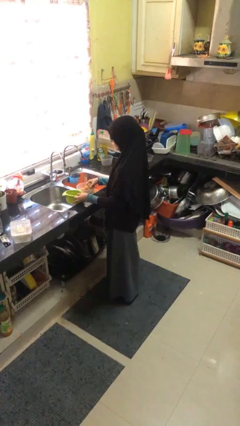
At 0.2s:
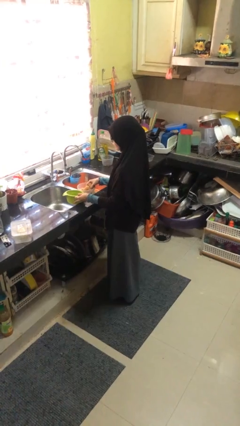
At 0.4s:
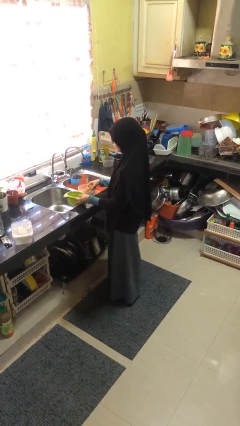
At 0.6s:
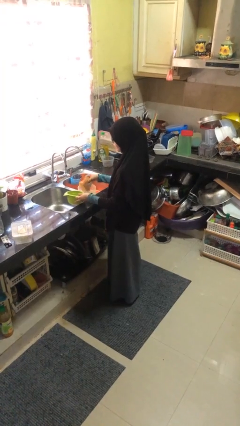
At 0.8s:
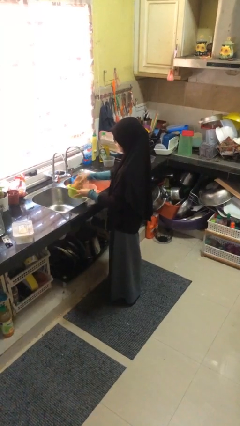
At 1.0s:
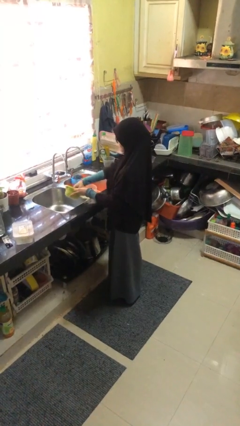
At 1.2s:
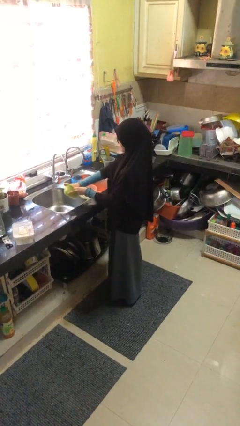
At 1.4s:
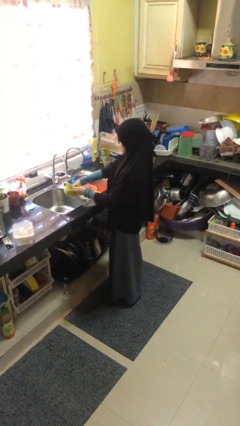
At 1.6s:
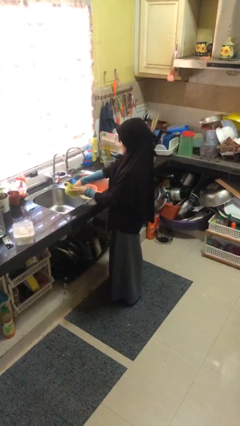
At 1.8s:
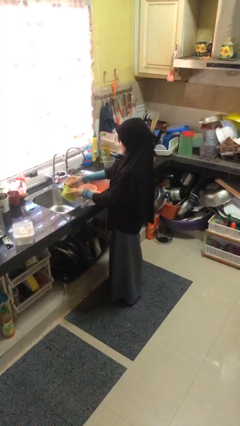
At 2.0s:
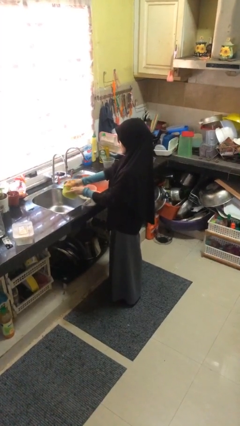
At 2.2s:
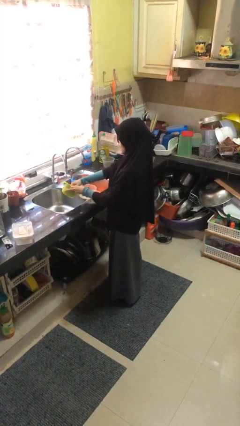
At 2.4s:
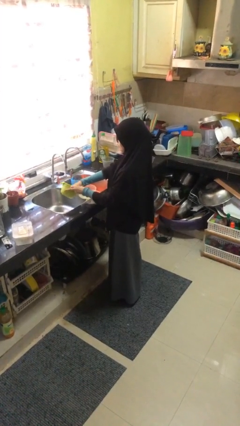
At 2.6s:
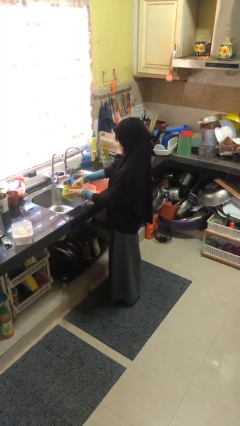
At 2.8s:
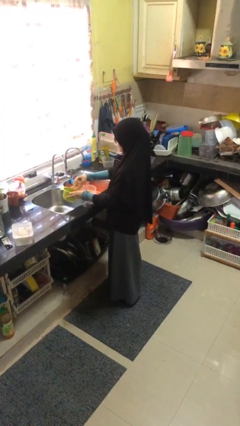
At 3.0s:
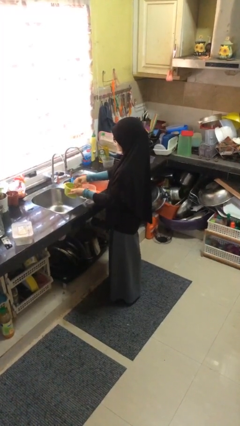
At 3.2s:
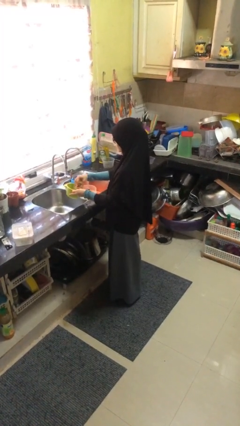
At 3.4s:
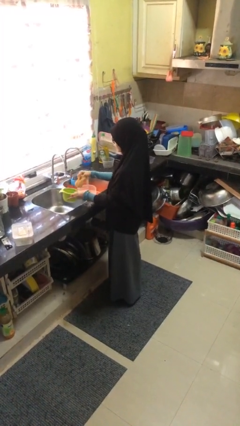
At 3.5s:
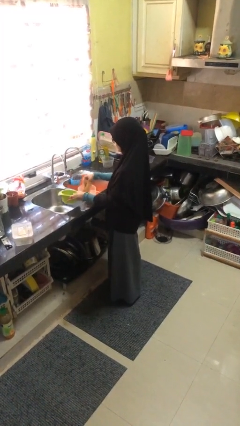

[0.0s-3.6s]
person washes dish

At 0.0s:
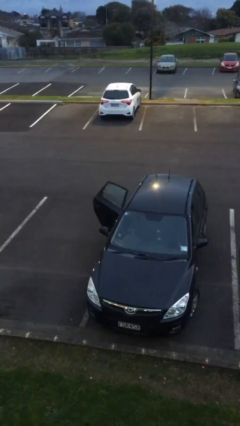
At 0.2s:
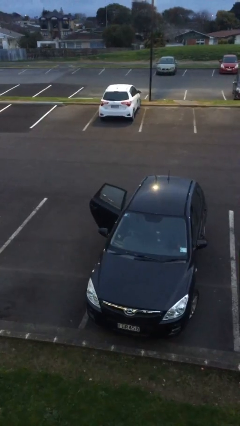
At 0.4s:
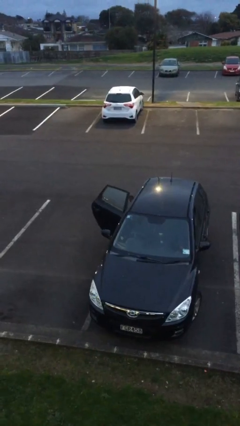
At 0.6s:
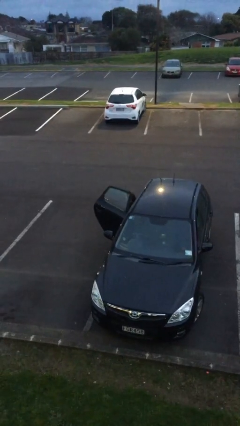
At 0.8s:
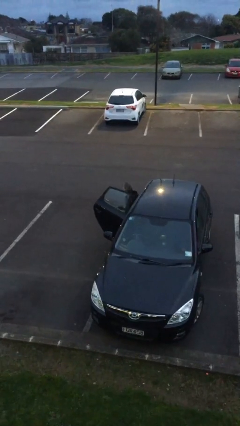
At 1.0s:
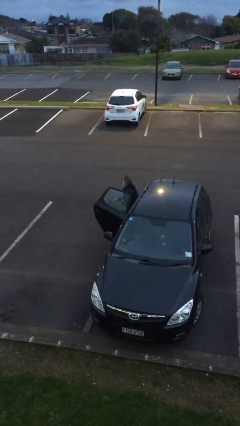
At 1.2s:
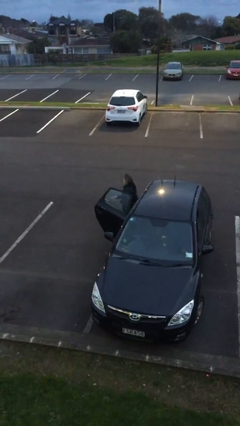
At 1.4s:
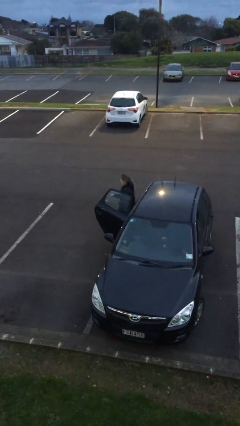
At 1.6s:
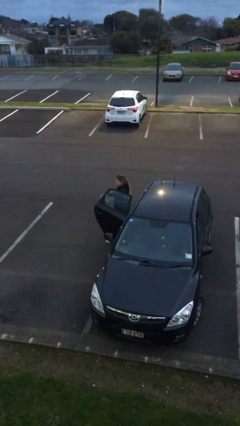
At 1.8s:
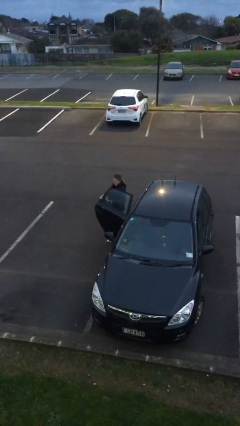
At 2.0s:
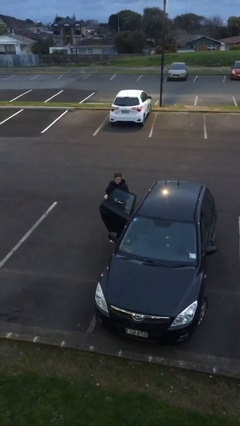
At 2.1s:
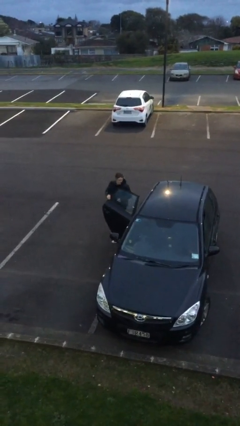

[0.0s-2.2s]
person exits car

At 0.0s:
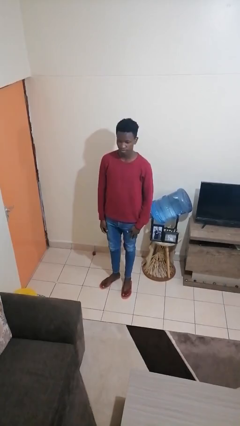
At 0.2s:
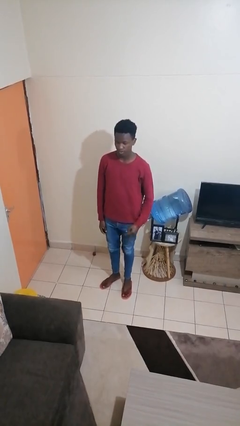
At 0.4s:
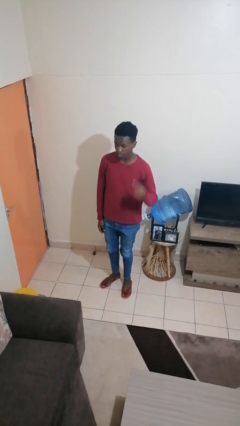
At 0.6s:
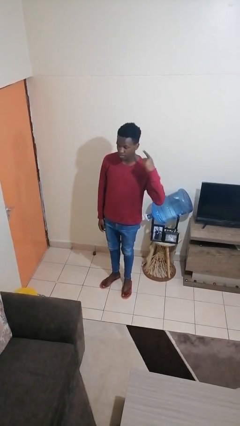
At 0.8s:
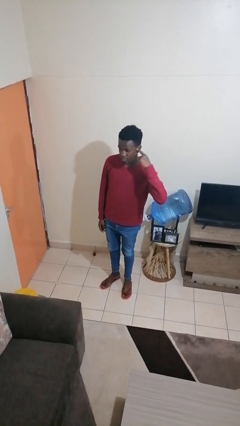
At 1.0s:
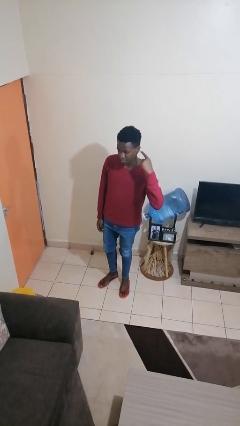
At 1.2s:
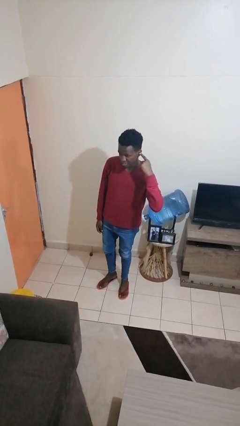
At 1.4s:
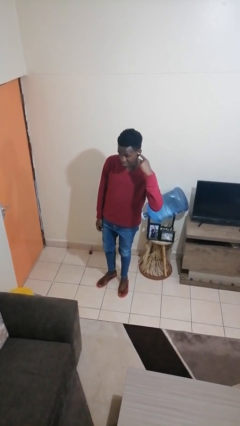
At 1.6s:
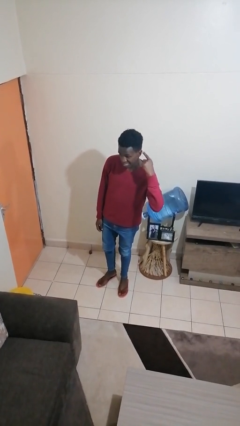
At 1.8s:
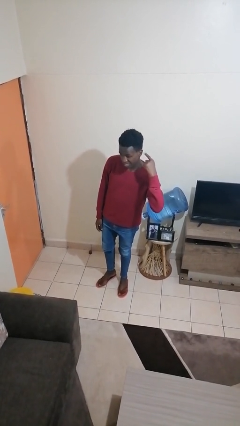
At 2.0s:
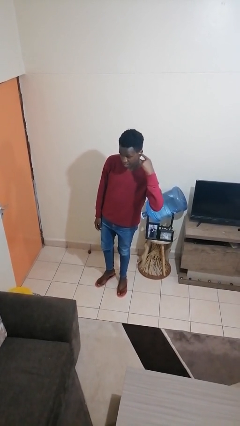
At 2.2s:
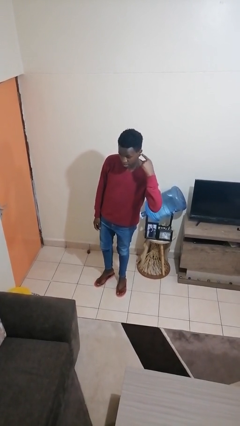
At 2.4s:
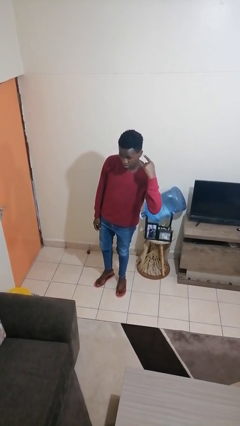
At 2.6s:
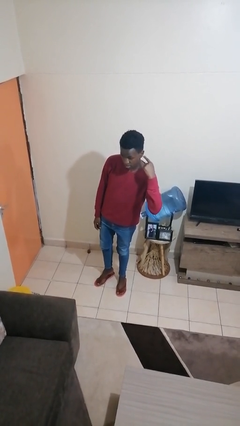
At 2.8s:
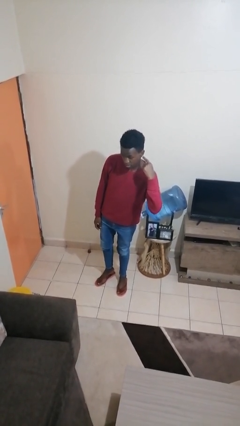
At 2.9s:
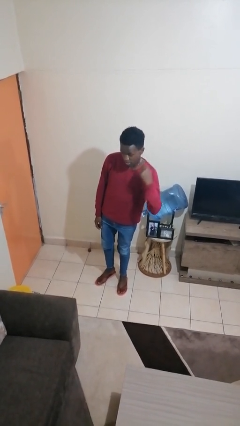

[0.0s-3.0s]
person gestures listen closely

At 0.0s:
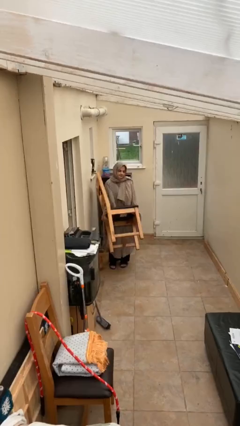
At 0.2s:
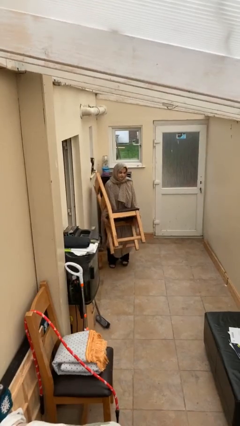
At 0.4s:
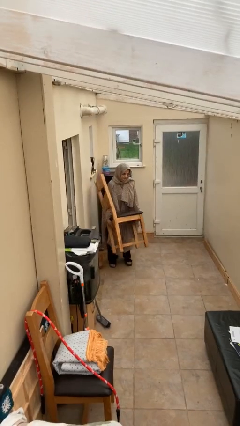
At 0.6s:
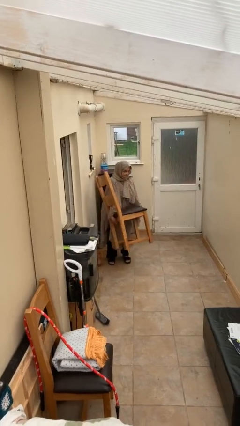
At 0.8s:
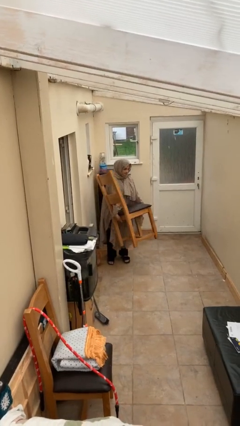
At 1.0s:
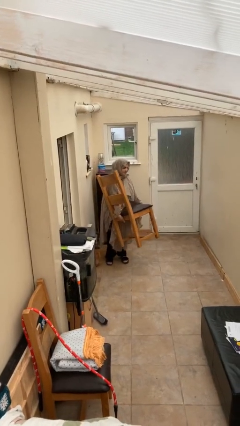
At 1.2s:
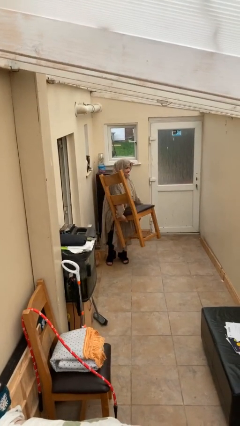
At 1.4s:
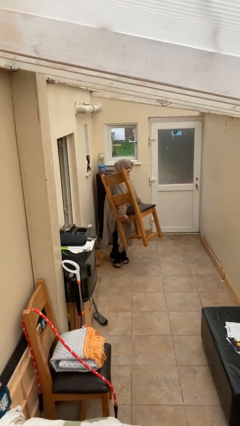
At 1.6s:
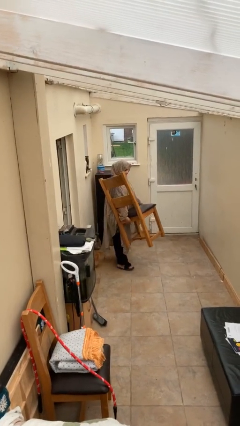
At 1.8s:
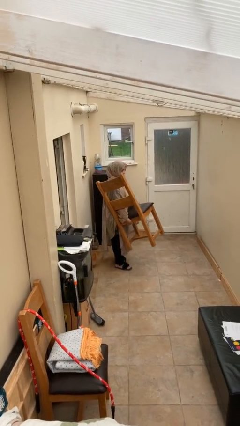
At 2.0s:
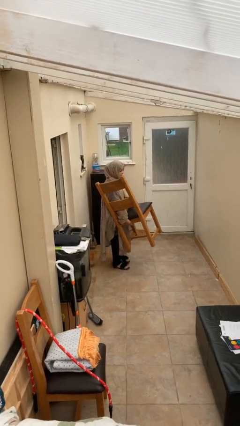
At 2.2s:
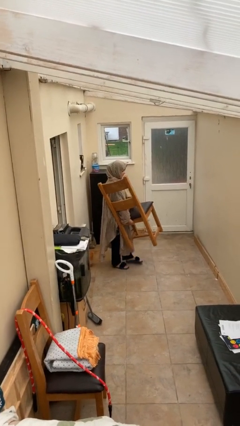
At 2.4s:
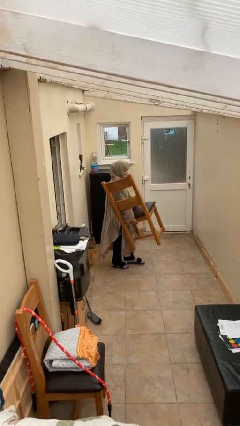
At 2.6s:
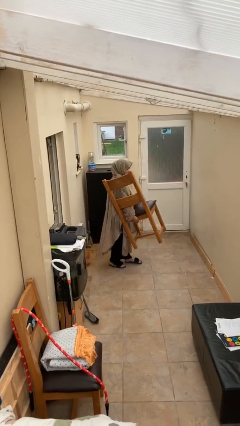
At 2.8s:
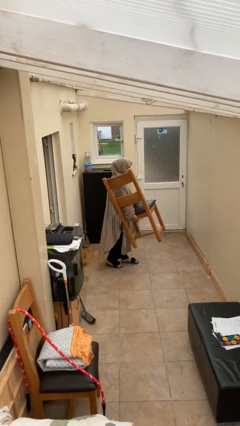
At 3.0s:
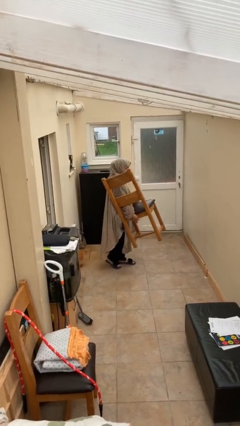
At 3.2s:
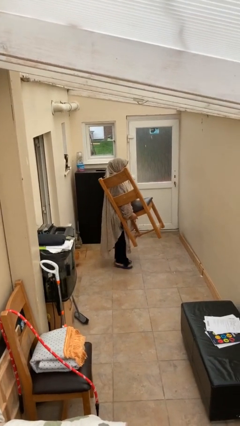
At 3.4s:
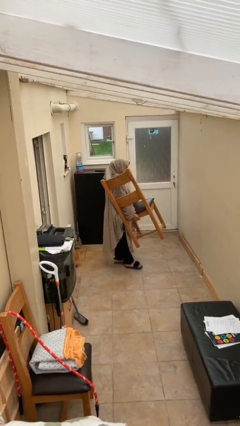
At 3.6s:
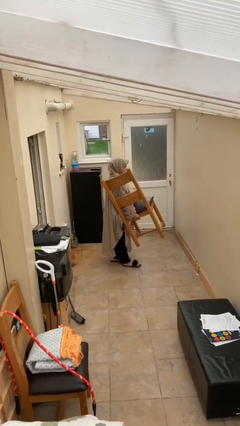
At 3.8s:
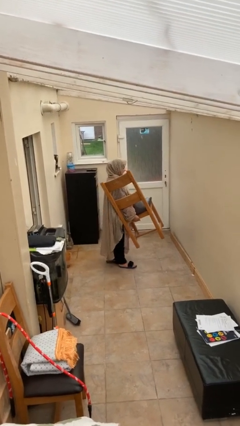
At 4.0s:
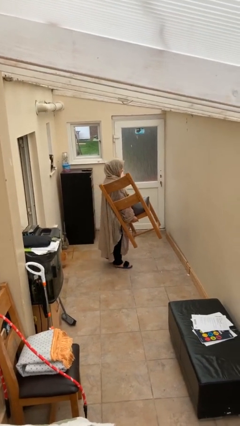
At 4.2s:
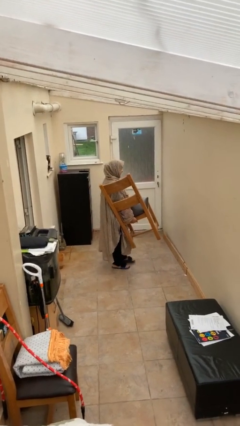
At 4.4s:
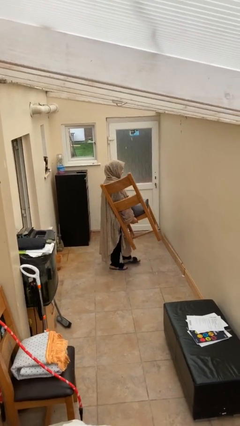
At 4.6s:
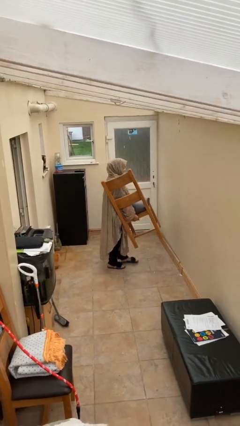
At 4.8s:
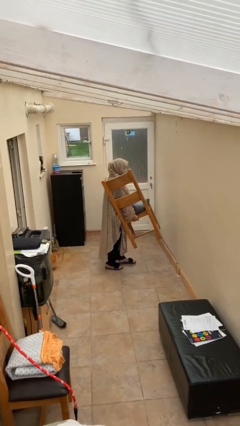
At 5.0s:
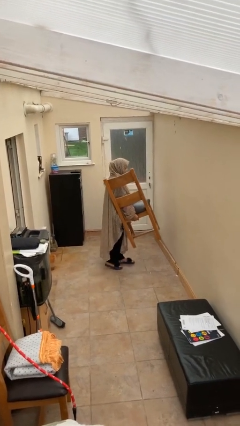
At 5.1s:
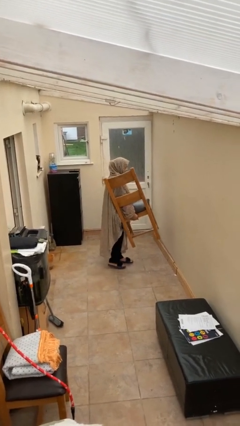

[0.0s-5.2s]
person carries heavy object

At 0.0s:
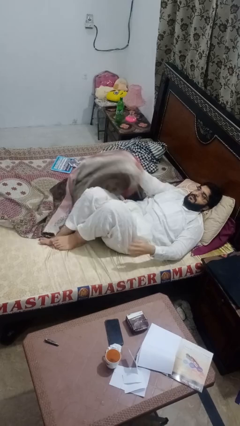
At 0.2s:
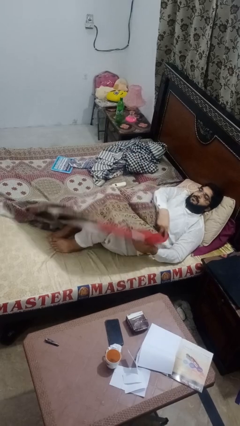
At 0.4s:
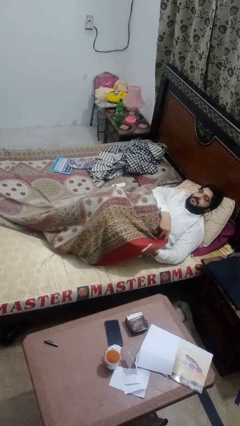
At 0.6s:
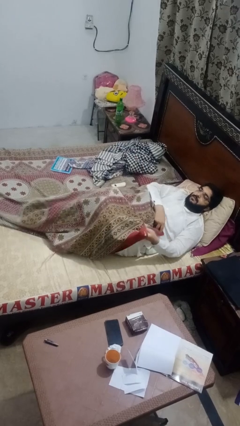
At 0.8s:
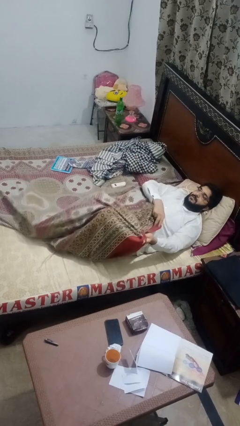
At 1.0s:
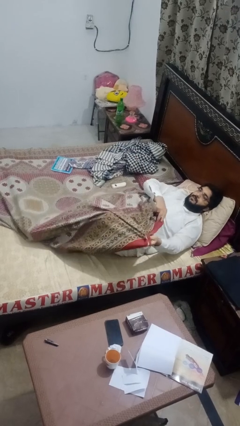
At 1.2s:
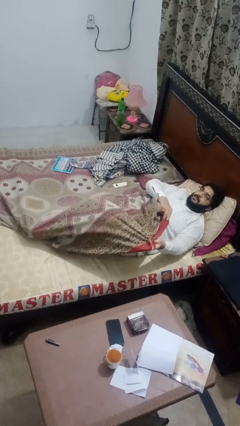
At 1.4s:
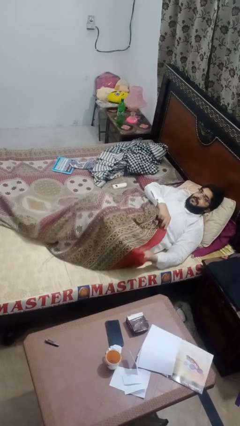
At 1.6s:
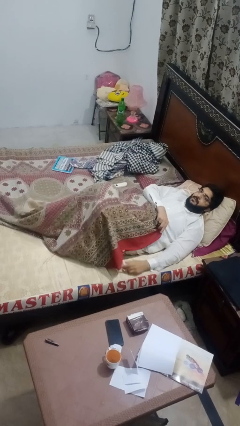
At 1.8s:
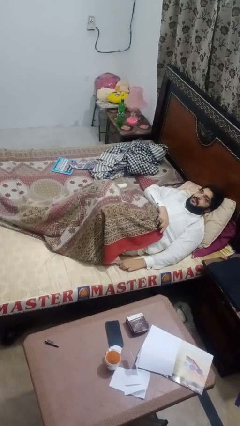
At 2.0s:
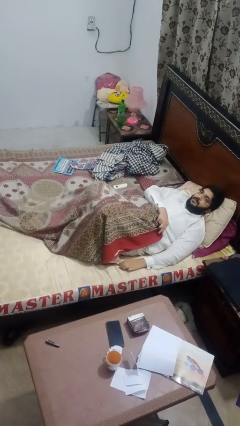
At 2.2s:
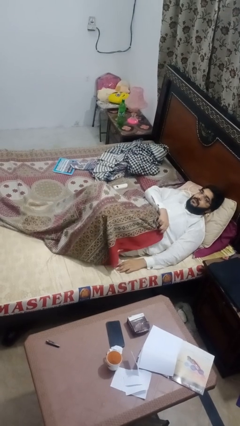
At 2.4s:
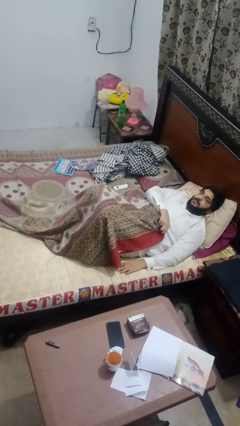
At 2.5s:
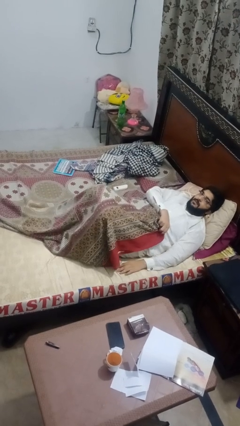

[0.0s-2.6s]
person covers with bedsheets

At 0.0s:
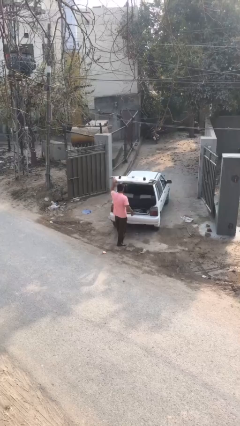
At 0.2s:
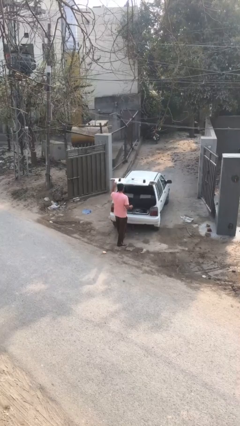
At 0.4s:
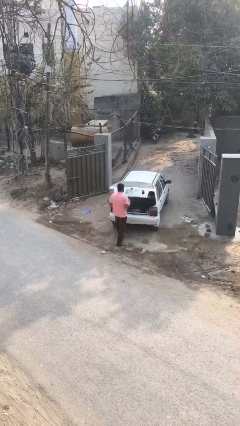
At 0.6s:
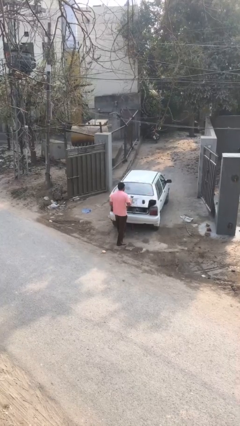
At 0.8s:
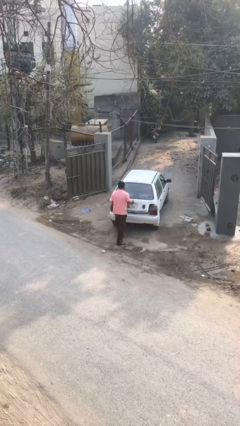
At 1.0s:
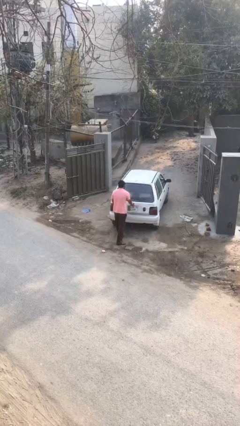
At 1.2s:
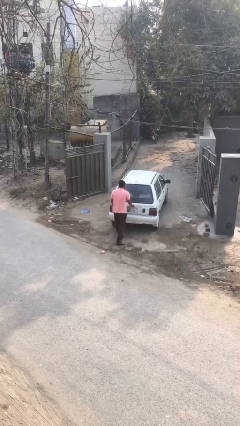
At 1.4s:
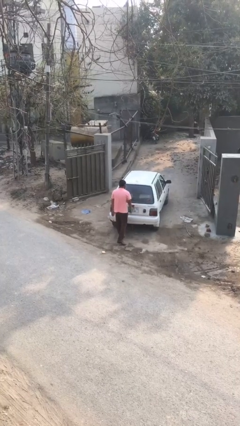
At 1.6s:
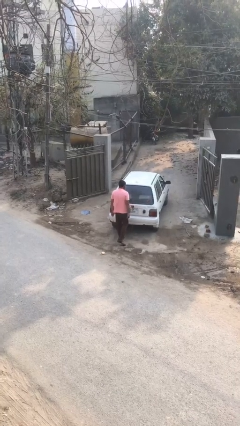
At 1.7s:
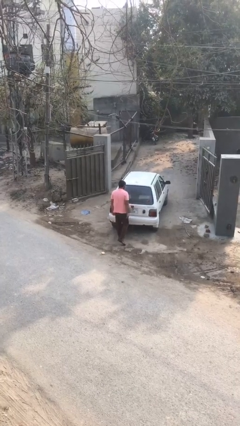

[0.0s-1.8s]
person closes car trunk
